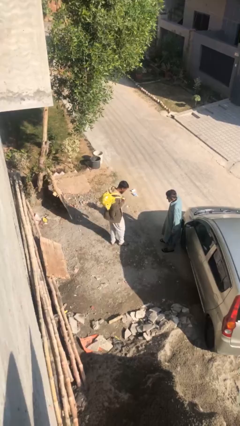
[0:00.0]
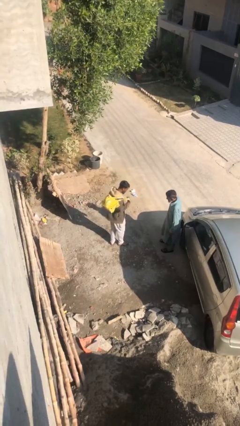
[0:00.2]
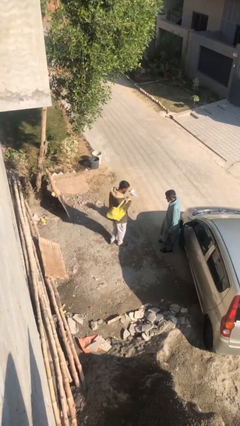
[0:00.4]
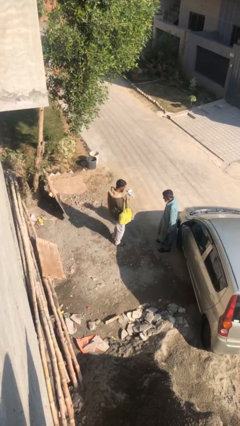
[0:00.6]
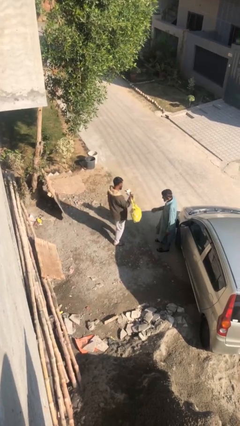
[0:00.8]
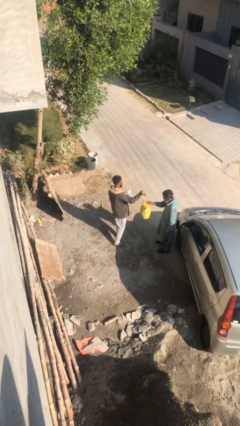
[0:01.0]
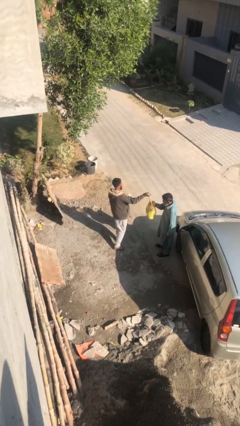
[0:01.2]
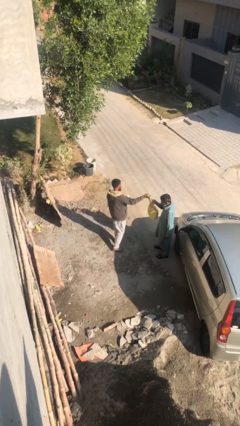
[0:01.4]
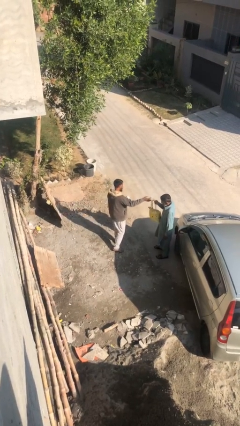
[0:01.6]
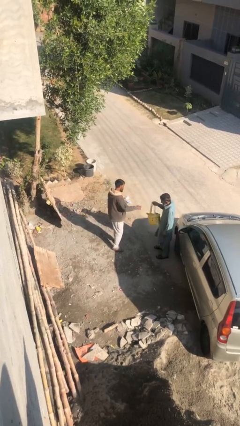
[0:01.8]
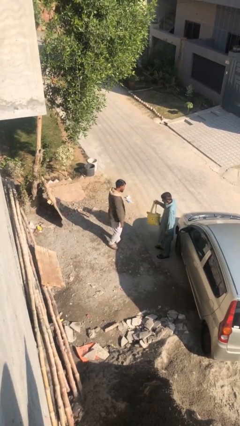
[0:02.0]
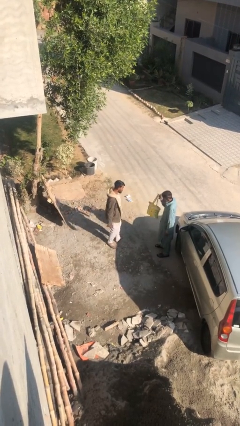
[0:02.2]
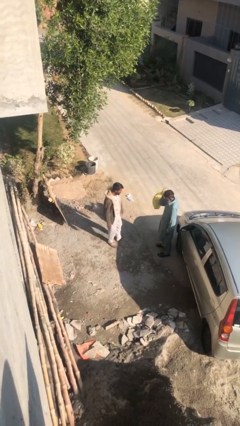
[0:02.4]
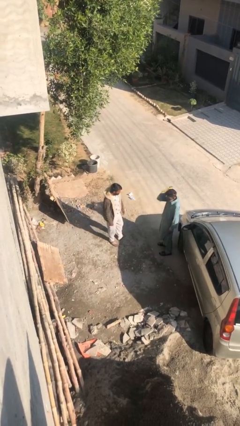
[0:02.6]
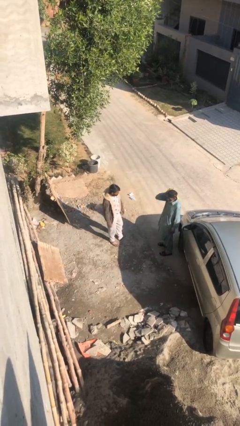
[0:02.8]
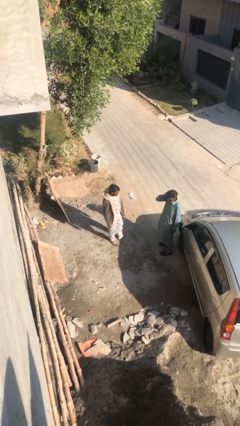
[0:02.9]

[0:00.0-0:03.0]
person transfers object to person

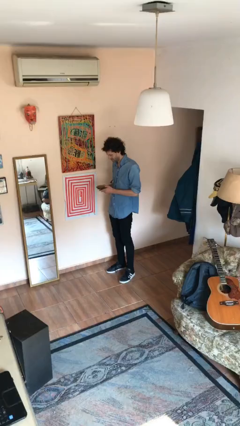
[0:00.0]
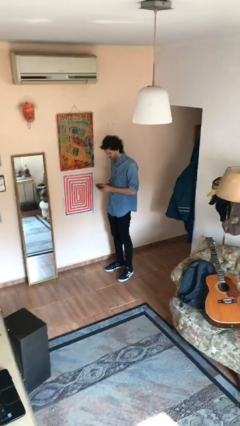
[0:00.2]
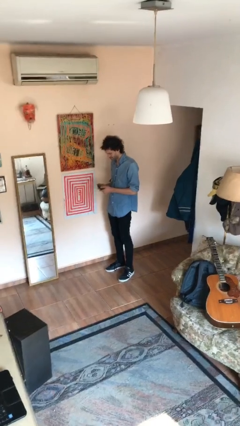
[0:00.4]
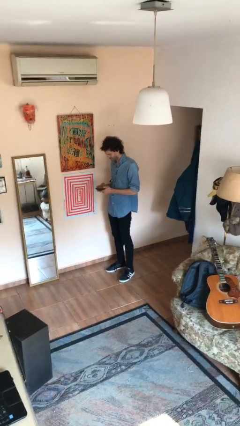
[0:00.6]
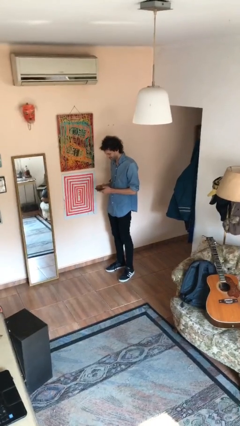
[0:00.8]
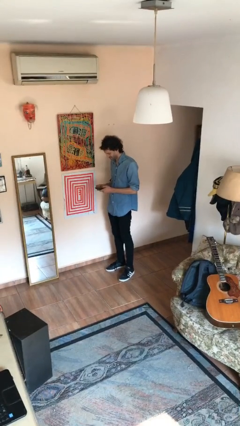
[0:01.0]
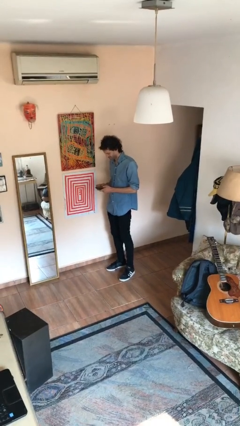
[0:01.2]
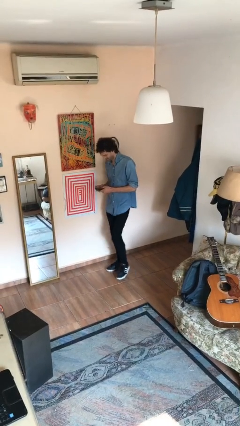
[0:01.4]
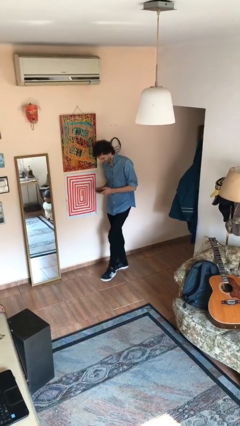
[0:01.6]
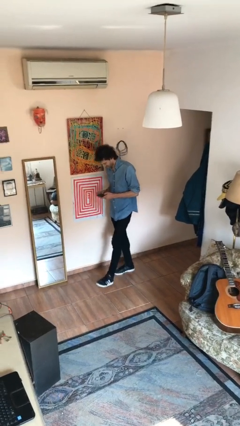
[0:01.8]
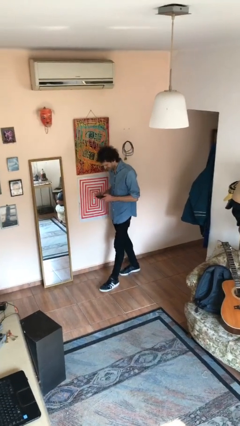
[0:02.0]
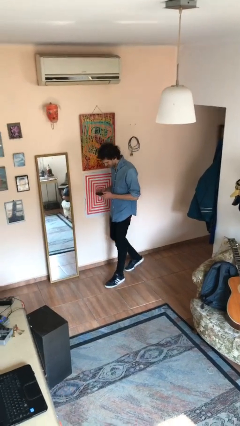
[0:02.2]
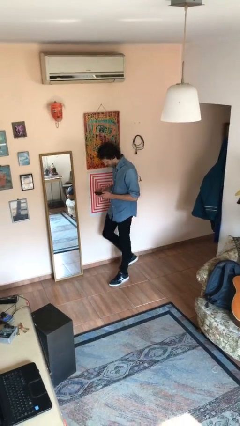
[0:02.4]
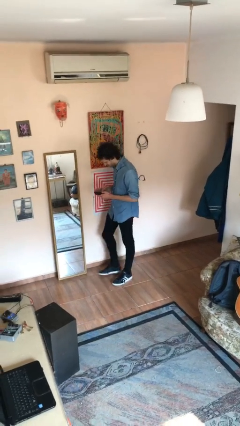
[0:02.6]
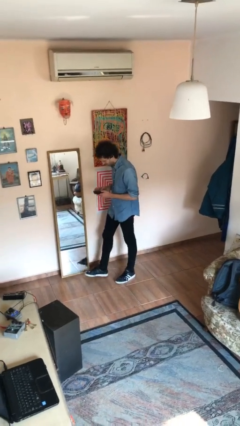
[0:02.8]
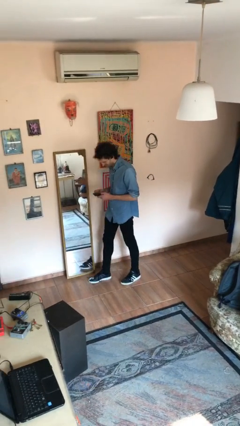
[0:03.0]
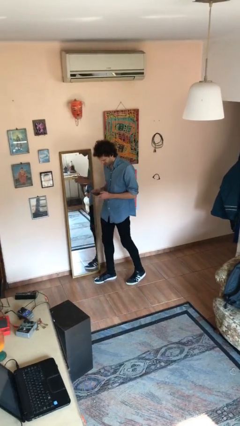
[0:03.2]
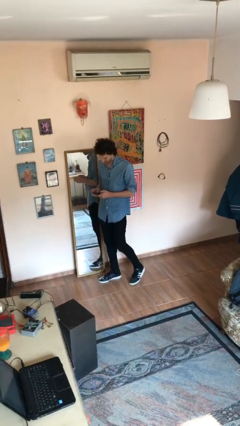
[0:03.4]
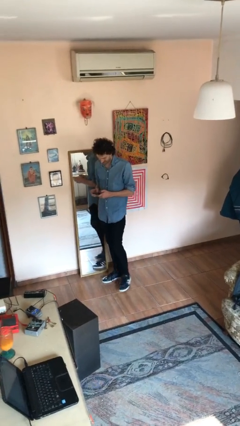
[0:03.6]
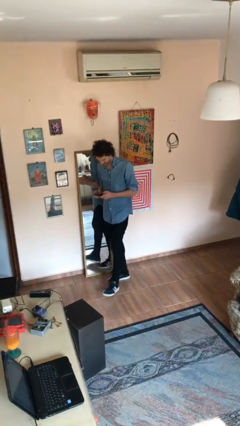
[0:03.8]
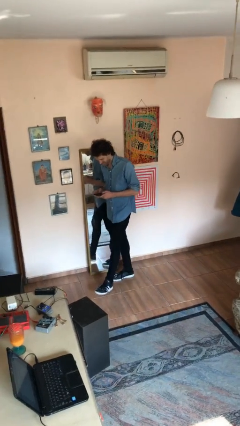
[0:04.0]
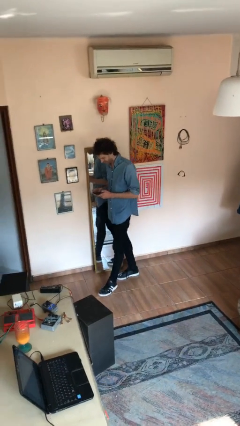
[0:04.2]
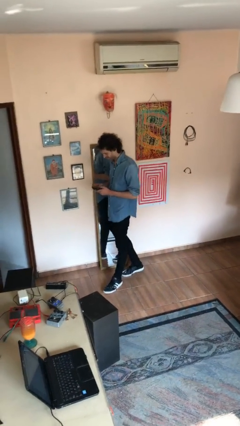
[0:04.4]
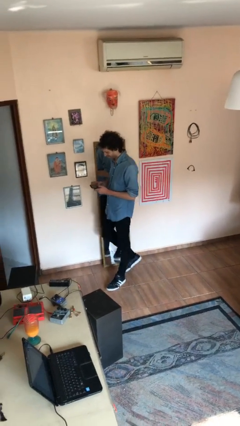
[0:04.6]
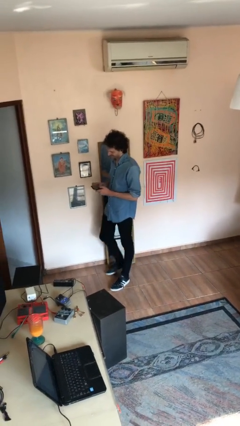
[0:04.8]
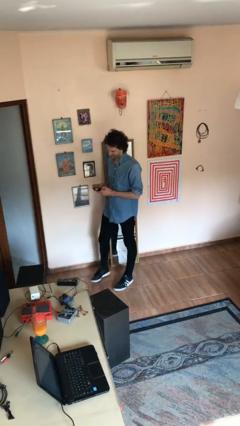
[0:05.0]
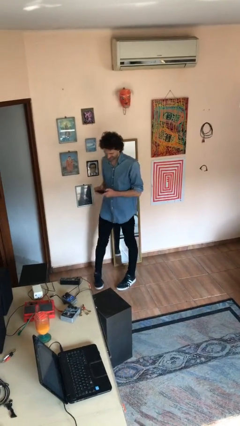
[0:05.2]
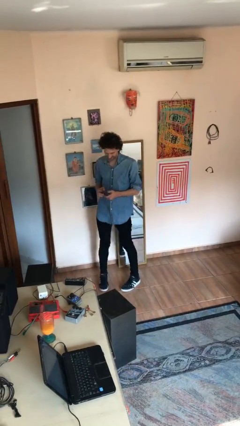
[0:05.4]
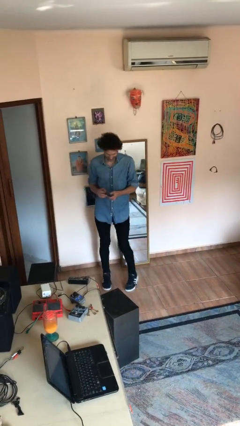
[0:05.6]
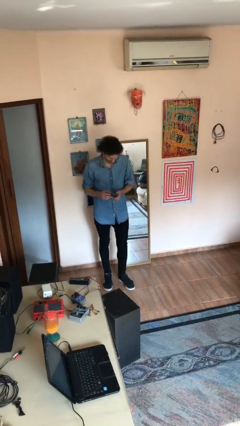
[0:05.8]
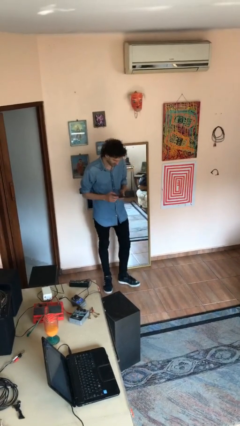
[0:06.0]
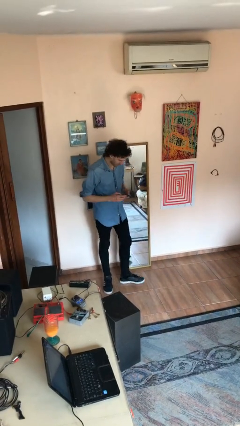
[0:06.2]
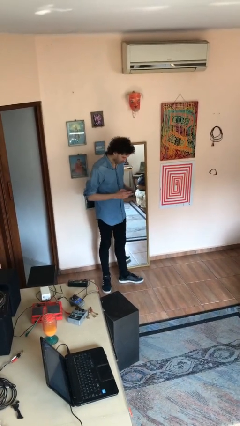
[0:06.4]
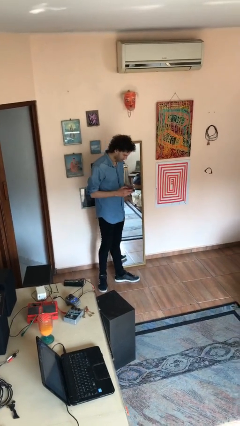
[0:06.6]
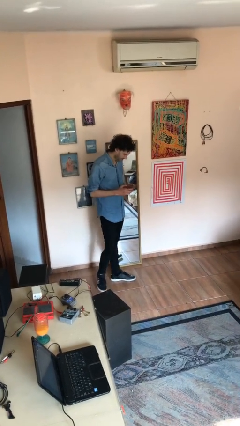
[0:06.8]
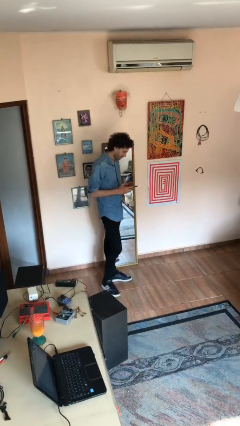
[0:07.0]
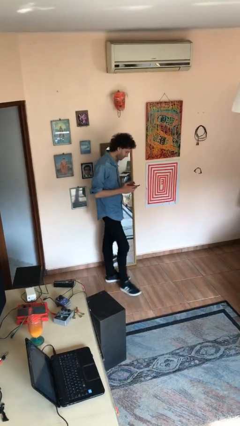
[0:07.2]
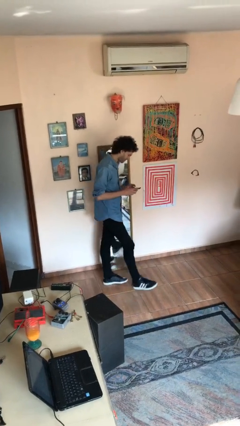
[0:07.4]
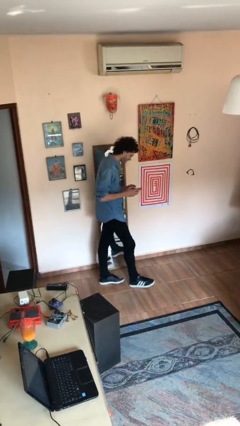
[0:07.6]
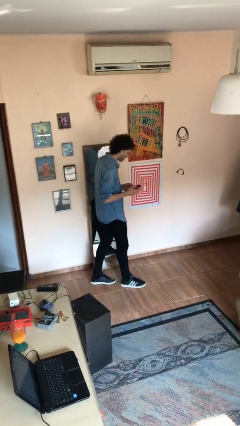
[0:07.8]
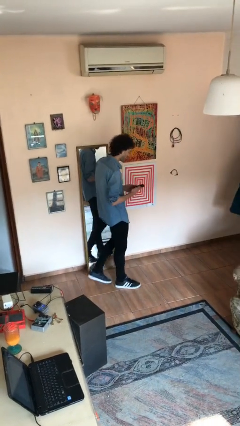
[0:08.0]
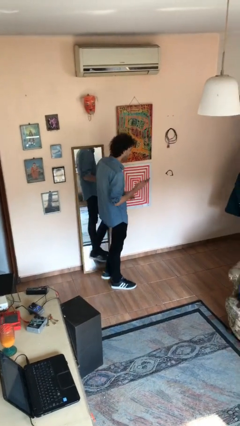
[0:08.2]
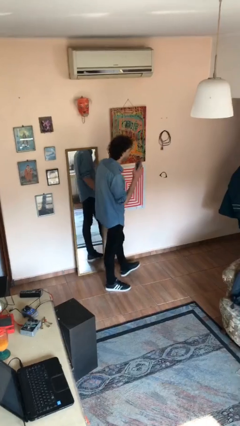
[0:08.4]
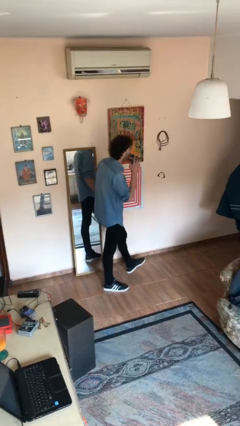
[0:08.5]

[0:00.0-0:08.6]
person texts on phone

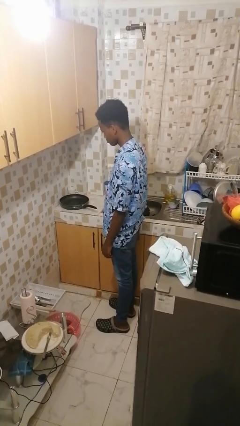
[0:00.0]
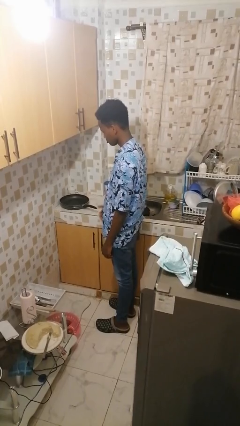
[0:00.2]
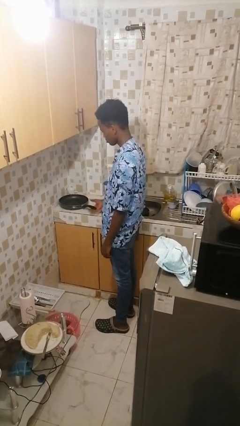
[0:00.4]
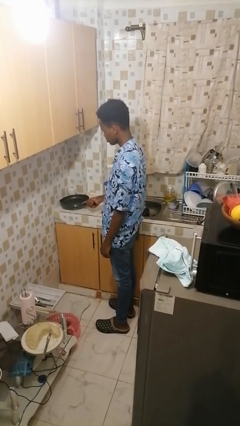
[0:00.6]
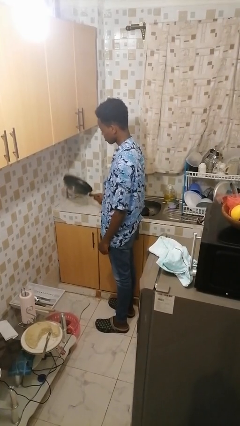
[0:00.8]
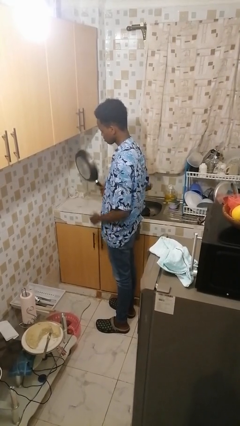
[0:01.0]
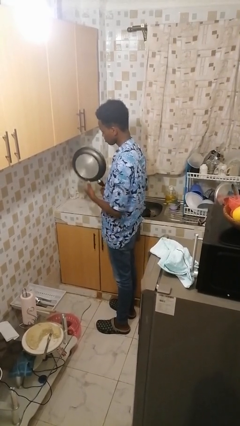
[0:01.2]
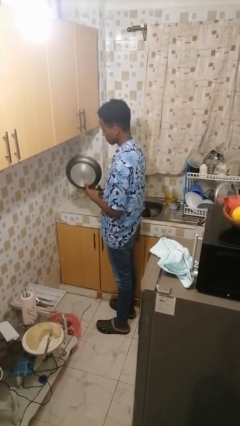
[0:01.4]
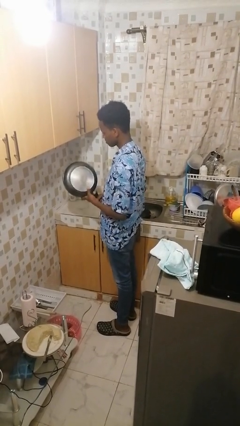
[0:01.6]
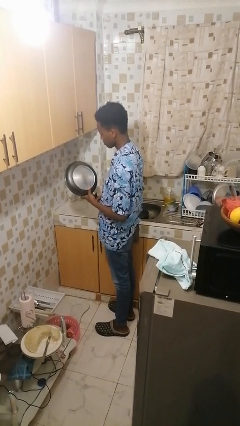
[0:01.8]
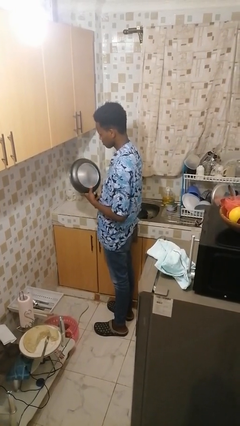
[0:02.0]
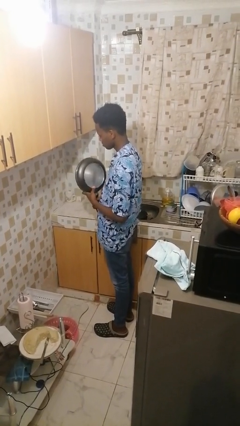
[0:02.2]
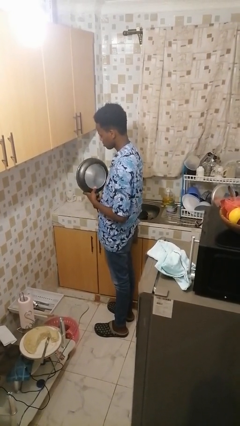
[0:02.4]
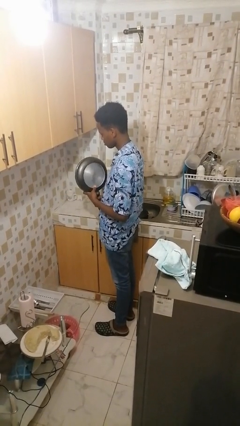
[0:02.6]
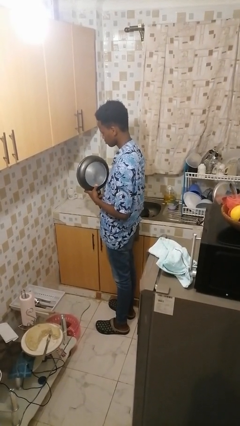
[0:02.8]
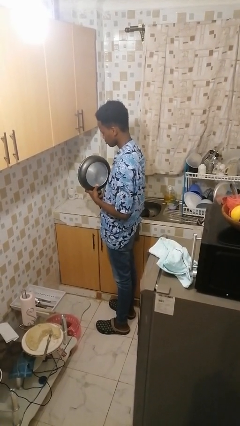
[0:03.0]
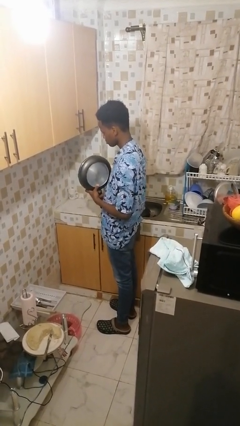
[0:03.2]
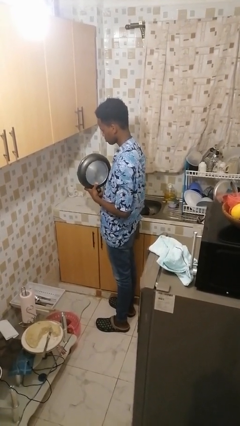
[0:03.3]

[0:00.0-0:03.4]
person picks up object from countertop

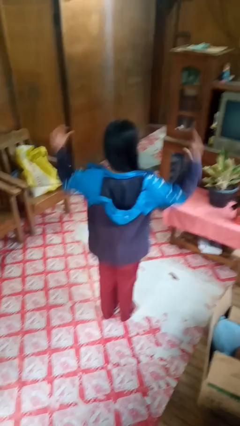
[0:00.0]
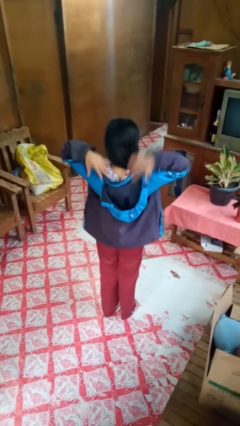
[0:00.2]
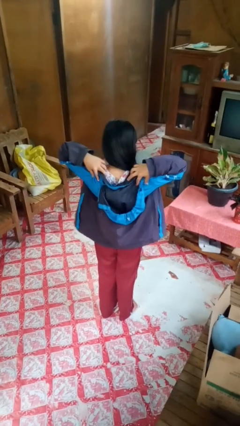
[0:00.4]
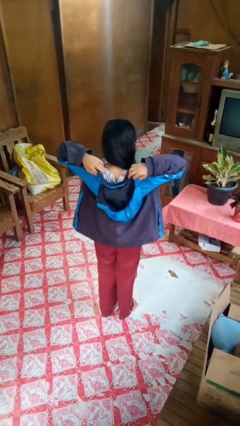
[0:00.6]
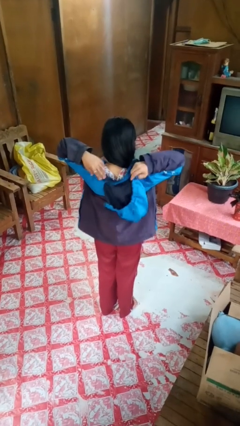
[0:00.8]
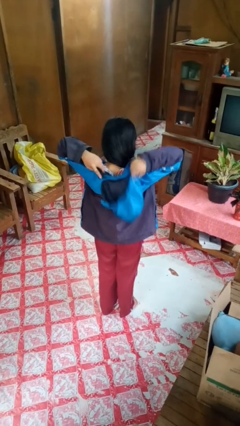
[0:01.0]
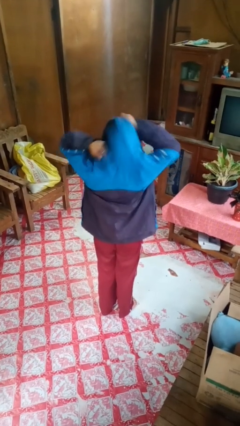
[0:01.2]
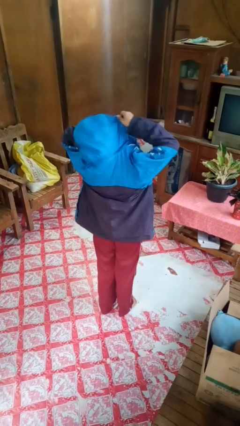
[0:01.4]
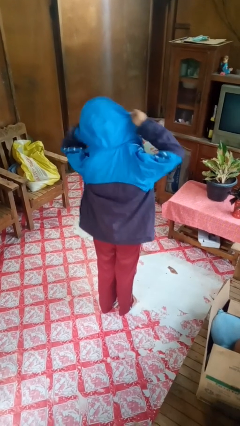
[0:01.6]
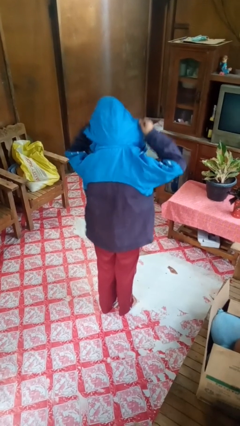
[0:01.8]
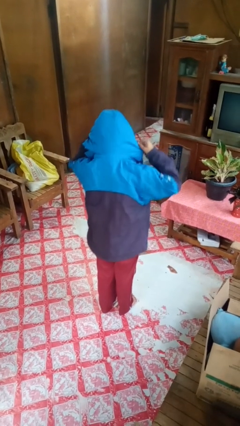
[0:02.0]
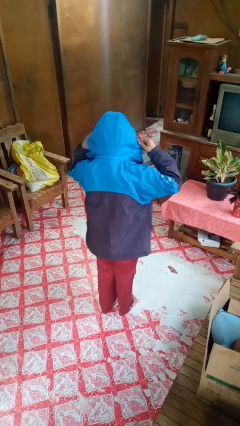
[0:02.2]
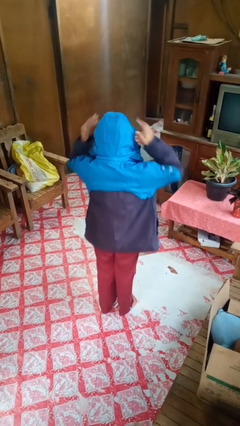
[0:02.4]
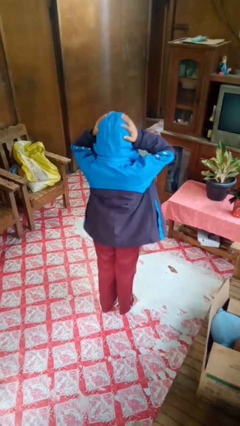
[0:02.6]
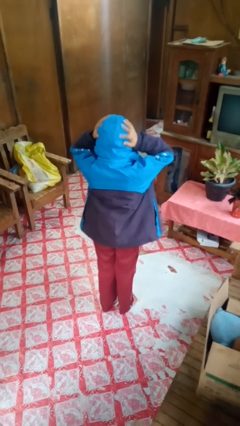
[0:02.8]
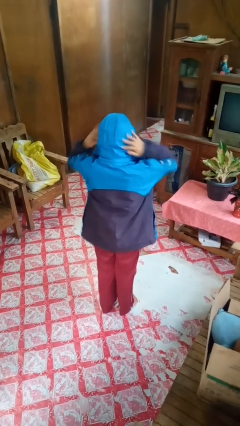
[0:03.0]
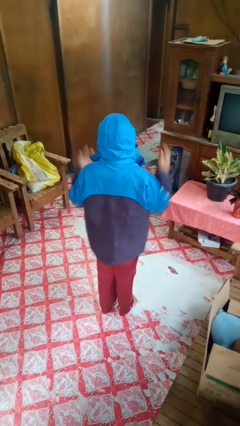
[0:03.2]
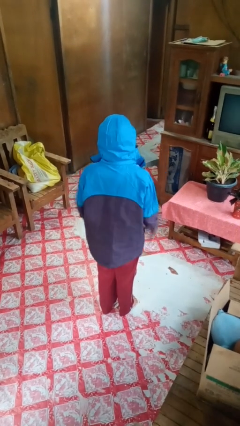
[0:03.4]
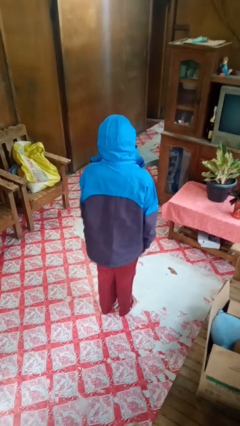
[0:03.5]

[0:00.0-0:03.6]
person puts on hoodie
